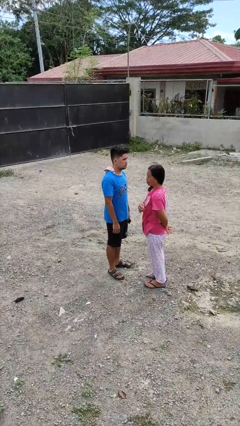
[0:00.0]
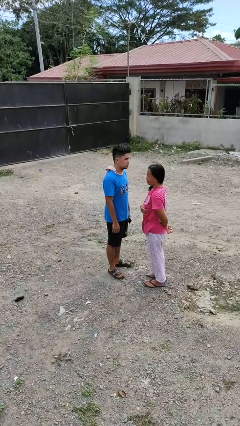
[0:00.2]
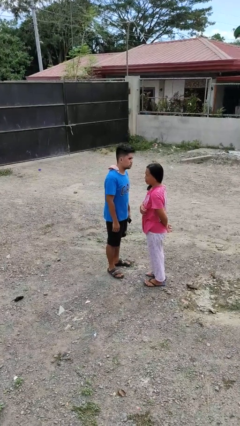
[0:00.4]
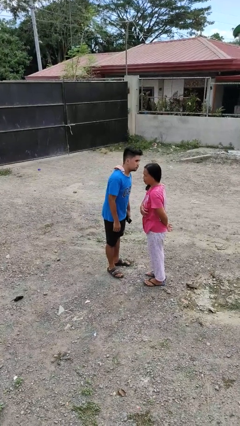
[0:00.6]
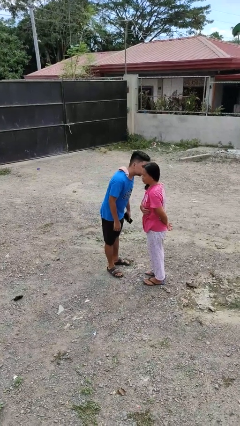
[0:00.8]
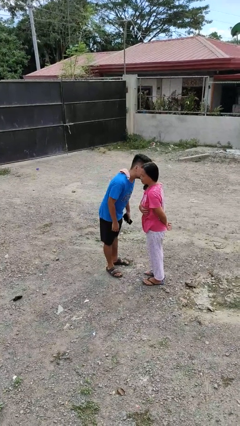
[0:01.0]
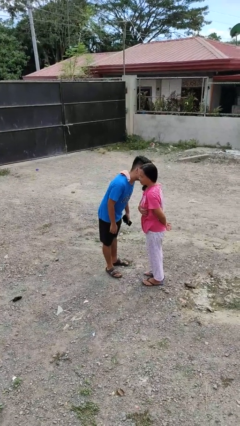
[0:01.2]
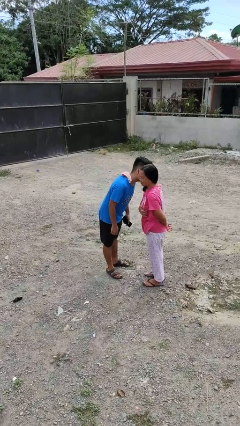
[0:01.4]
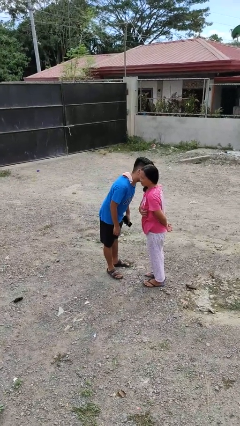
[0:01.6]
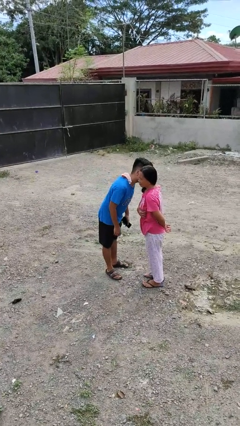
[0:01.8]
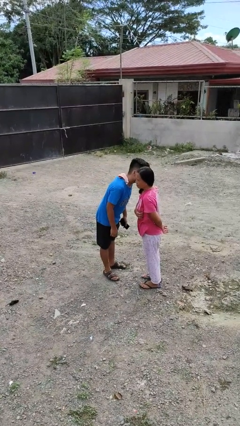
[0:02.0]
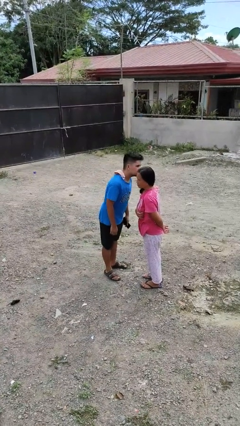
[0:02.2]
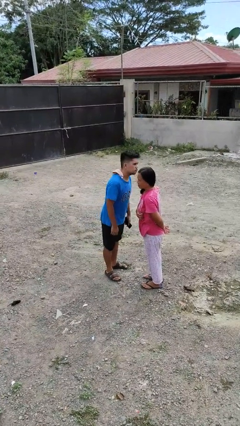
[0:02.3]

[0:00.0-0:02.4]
person kisses cheek of person

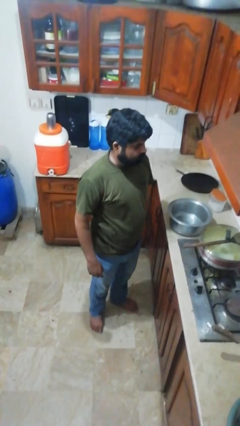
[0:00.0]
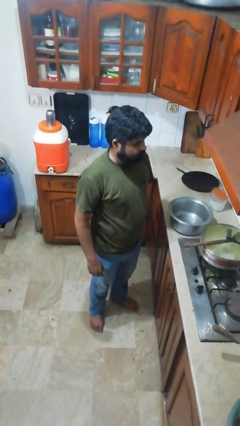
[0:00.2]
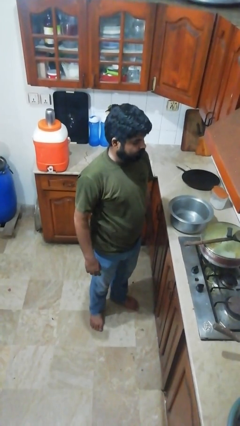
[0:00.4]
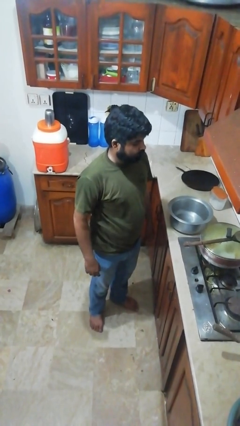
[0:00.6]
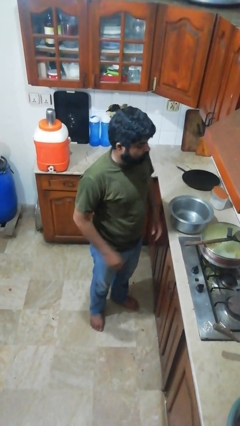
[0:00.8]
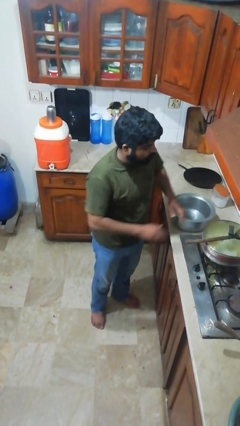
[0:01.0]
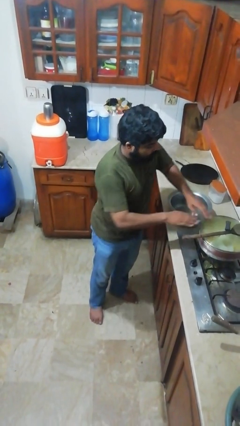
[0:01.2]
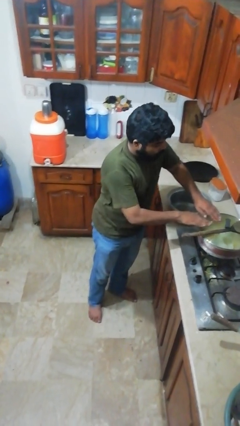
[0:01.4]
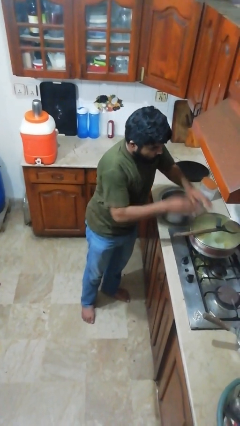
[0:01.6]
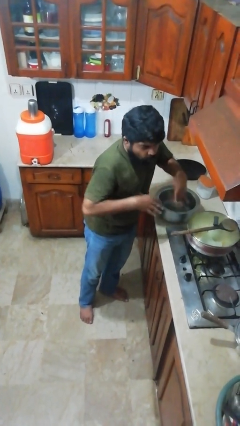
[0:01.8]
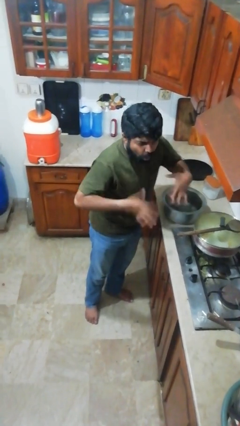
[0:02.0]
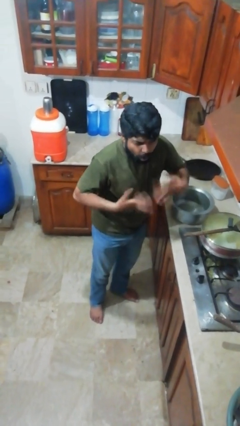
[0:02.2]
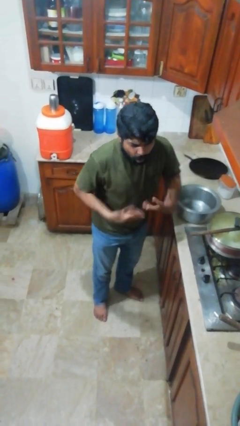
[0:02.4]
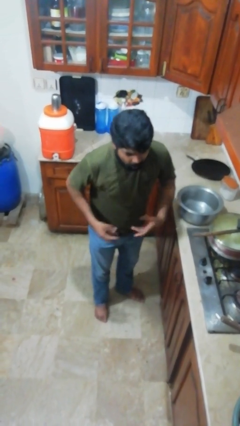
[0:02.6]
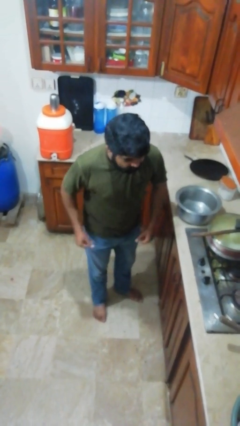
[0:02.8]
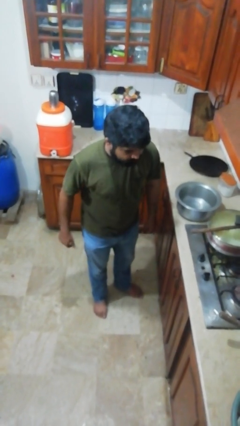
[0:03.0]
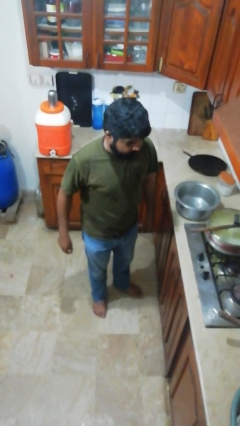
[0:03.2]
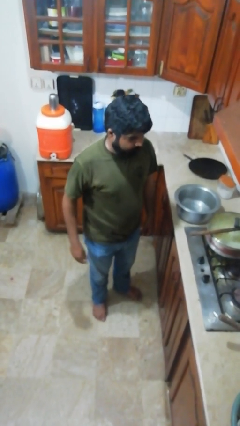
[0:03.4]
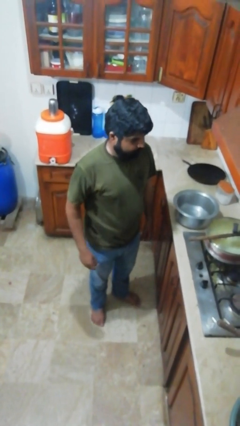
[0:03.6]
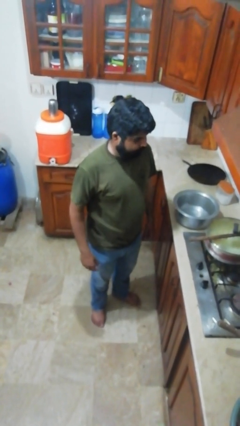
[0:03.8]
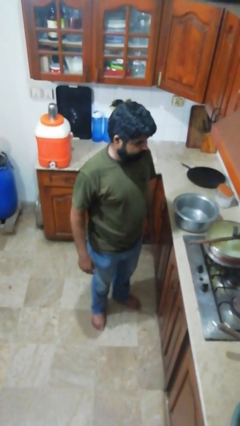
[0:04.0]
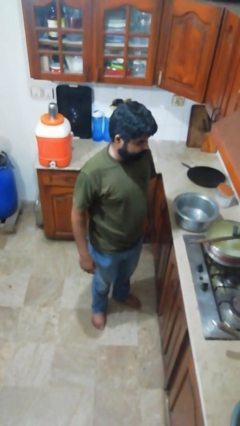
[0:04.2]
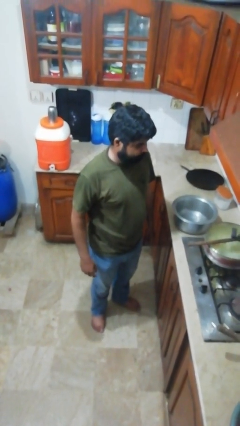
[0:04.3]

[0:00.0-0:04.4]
person burns hand

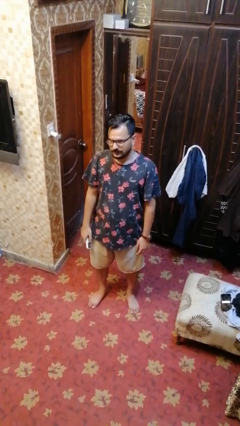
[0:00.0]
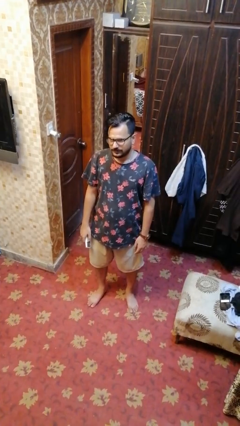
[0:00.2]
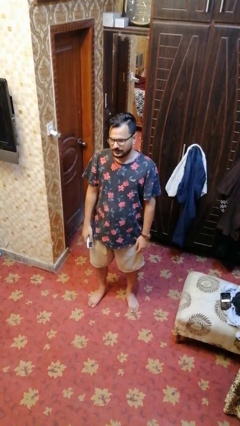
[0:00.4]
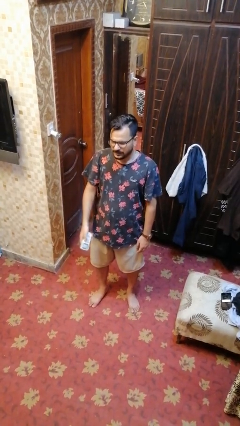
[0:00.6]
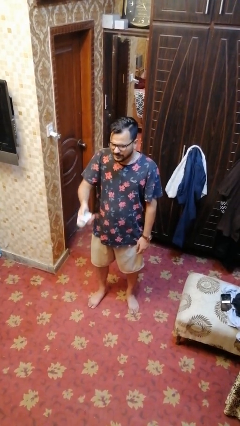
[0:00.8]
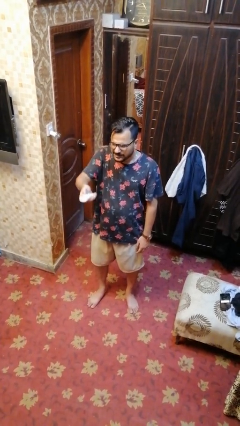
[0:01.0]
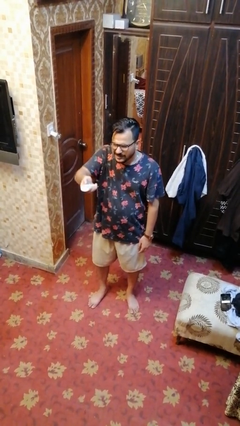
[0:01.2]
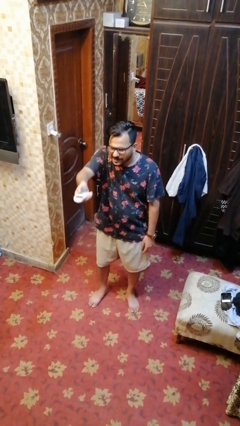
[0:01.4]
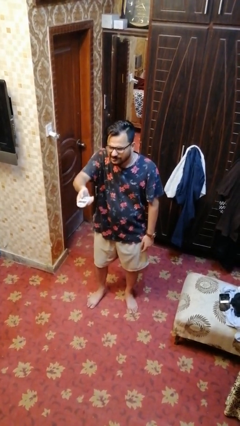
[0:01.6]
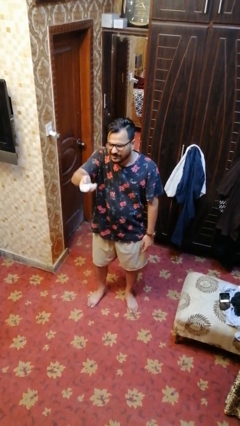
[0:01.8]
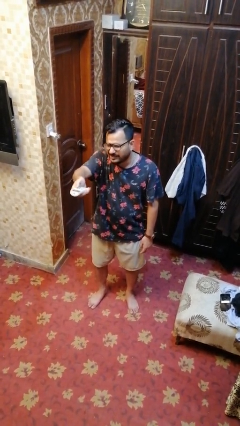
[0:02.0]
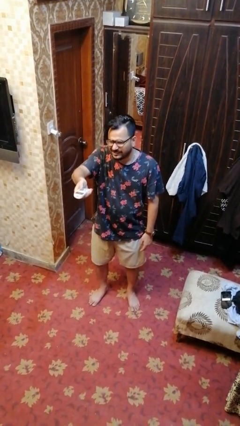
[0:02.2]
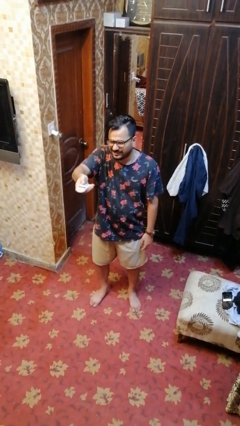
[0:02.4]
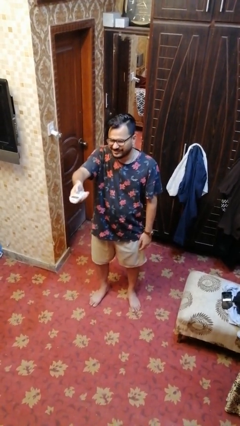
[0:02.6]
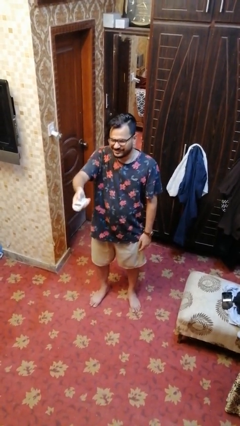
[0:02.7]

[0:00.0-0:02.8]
person uses television remote

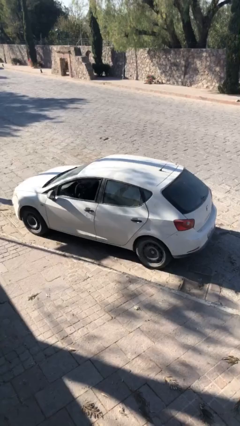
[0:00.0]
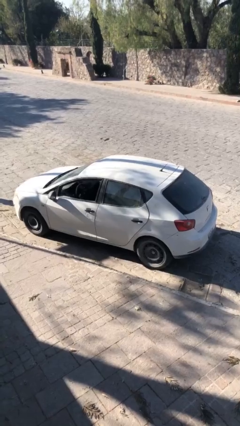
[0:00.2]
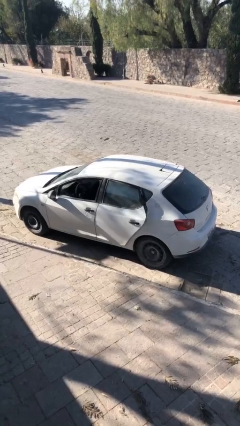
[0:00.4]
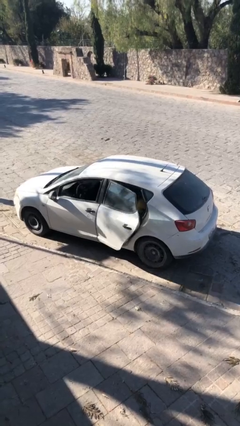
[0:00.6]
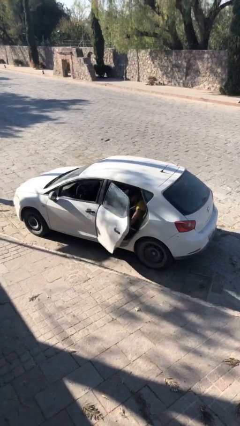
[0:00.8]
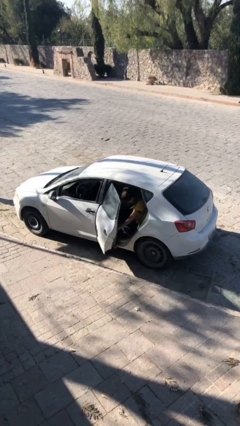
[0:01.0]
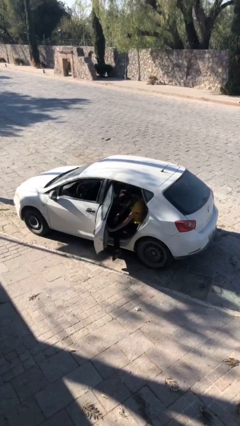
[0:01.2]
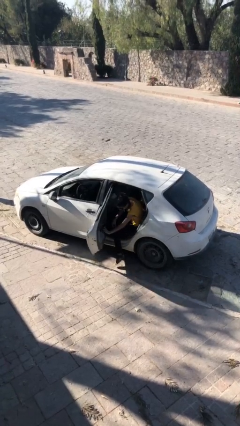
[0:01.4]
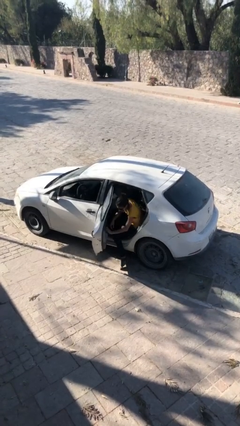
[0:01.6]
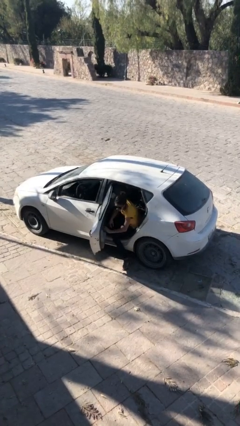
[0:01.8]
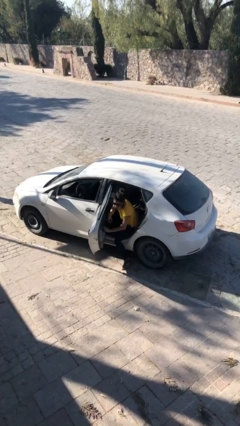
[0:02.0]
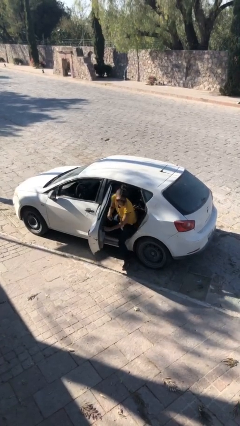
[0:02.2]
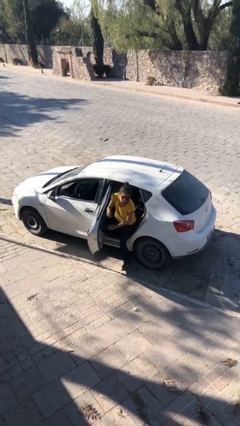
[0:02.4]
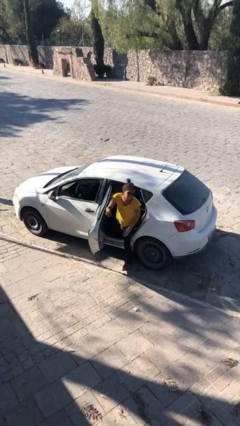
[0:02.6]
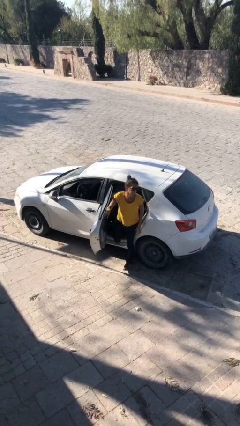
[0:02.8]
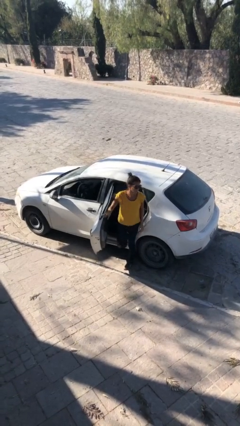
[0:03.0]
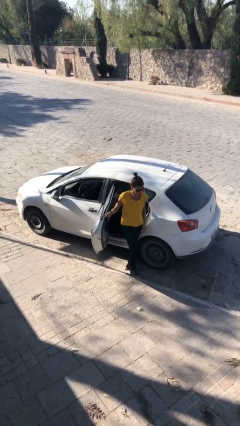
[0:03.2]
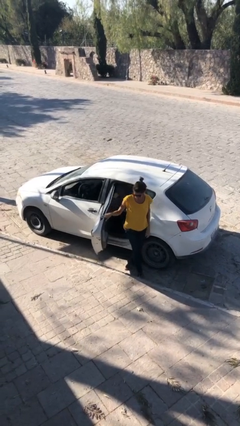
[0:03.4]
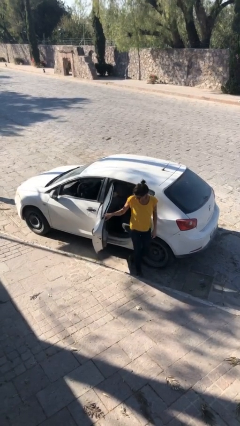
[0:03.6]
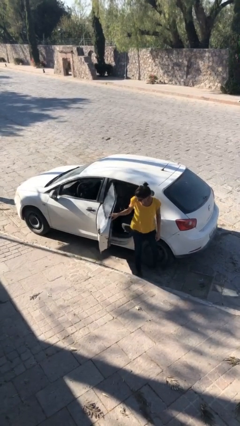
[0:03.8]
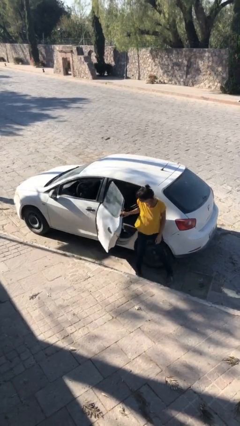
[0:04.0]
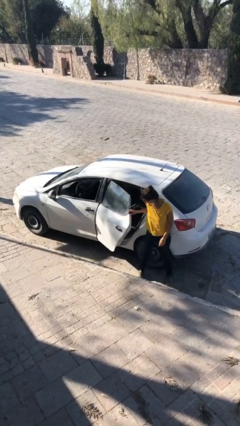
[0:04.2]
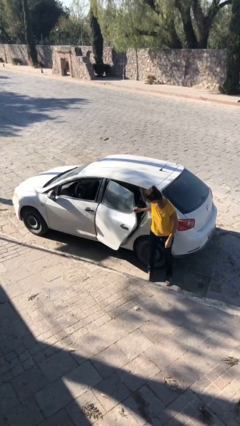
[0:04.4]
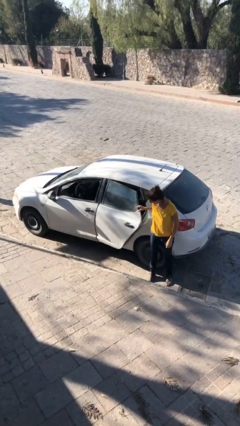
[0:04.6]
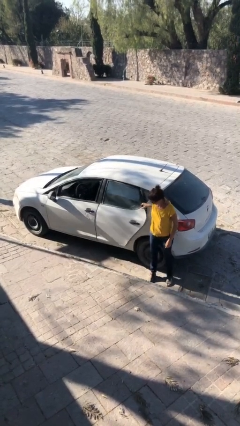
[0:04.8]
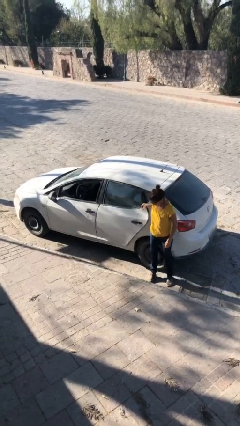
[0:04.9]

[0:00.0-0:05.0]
car drops off person

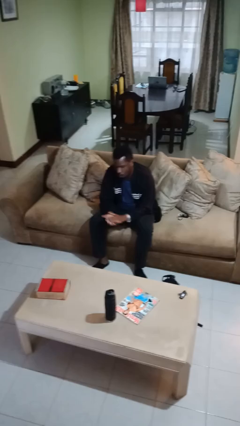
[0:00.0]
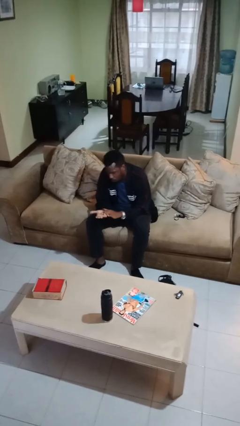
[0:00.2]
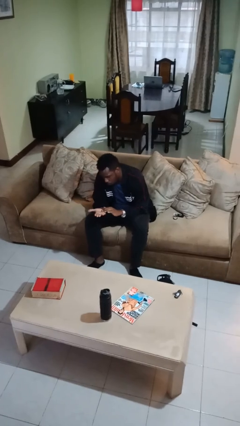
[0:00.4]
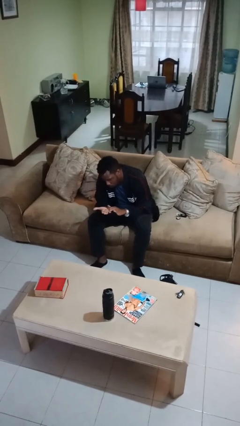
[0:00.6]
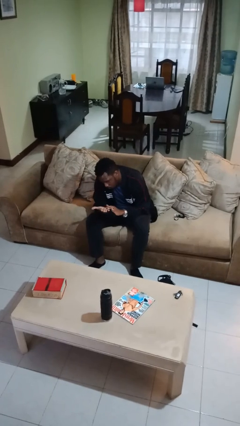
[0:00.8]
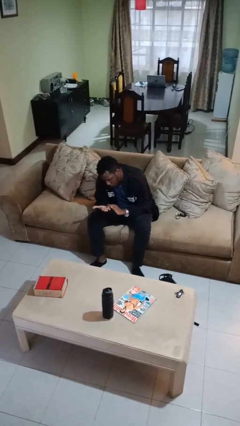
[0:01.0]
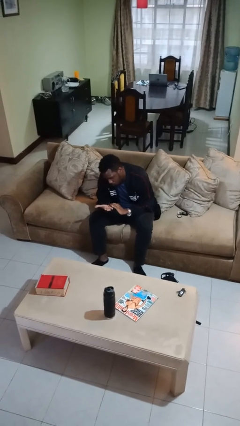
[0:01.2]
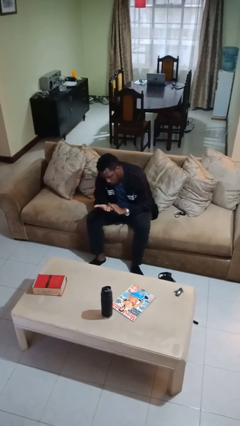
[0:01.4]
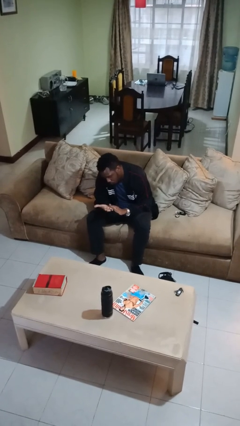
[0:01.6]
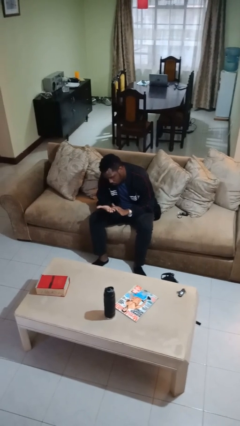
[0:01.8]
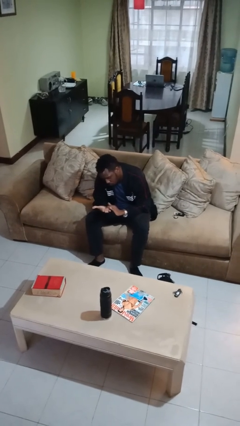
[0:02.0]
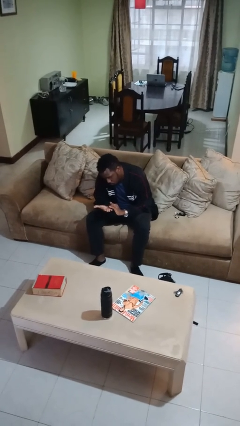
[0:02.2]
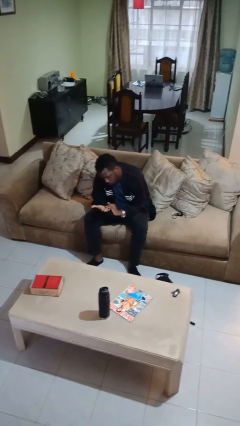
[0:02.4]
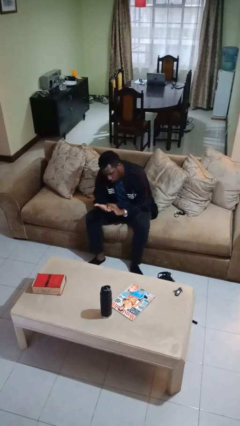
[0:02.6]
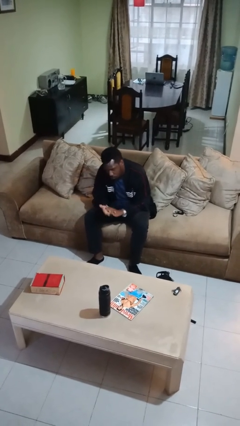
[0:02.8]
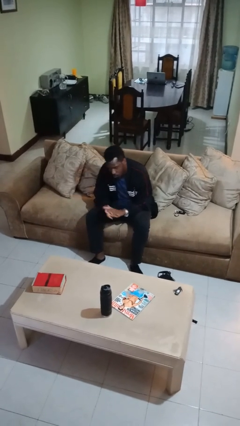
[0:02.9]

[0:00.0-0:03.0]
person looks at hands in lap
